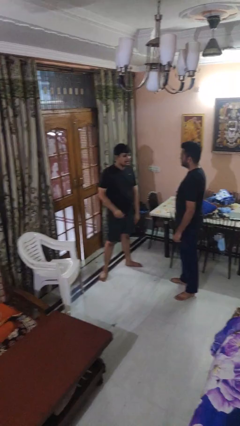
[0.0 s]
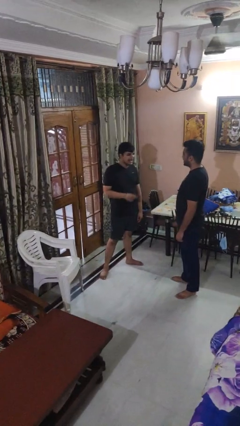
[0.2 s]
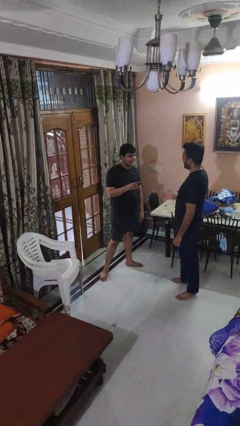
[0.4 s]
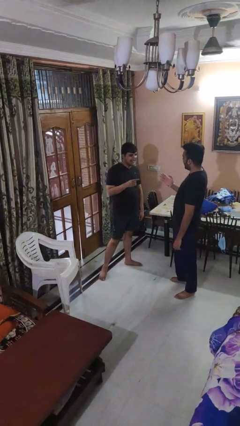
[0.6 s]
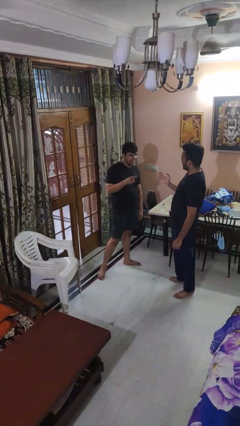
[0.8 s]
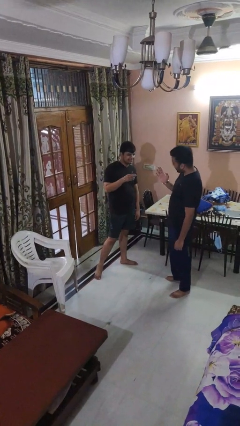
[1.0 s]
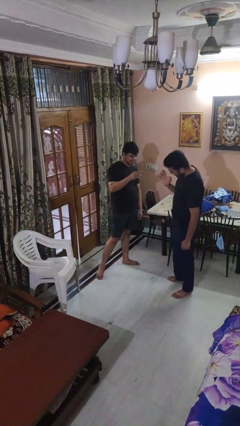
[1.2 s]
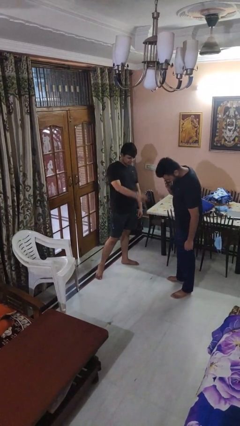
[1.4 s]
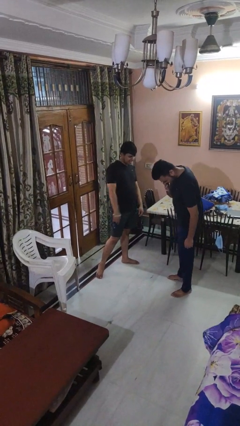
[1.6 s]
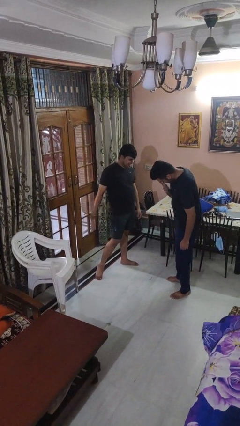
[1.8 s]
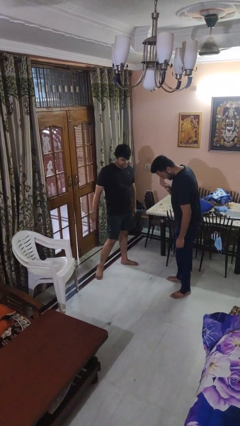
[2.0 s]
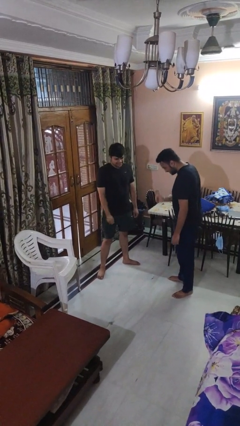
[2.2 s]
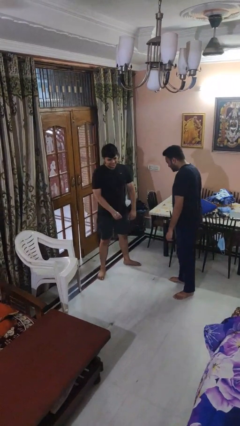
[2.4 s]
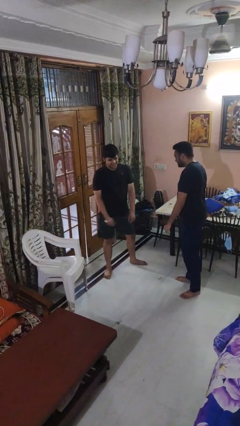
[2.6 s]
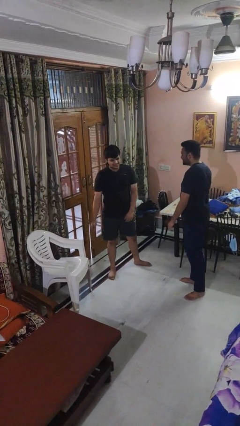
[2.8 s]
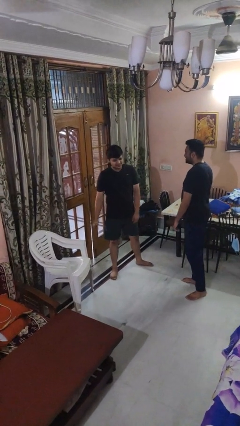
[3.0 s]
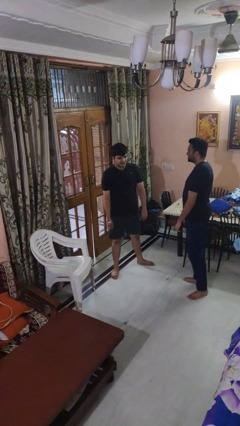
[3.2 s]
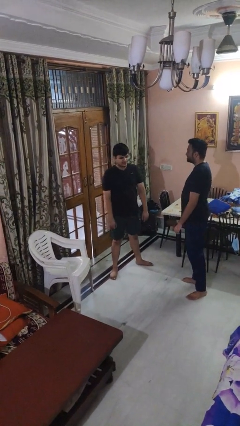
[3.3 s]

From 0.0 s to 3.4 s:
person laughs with person

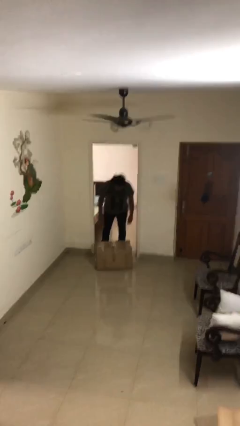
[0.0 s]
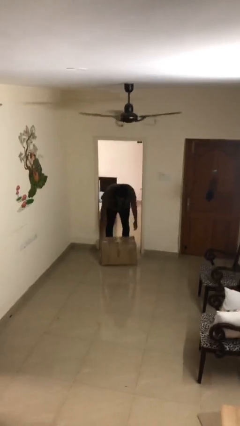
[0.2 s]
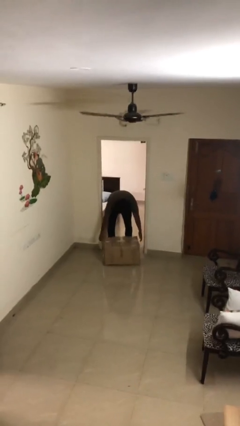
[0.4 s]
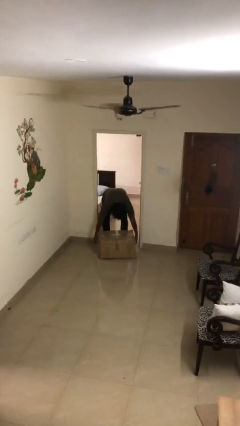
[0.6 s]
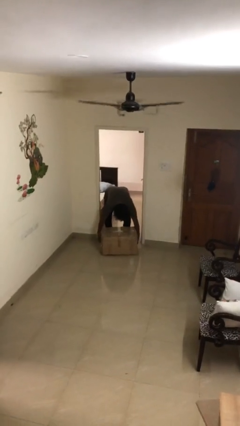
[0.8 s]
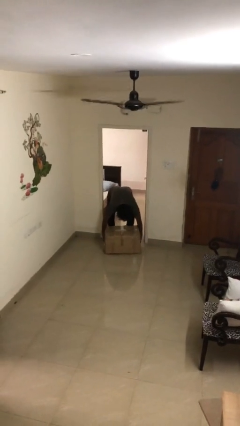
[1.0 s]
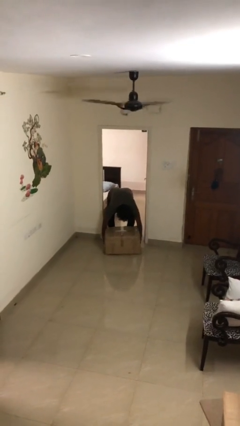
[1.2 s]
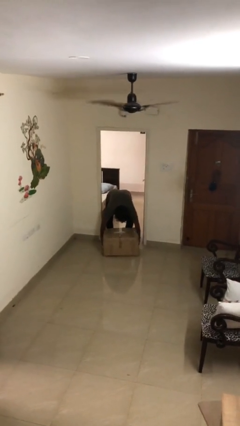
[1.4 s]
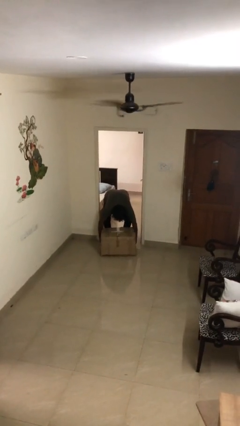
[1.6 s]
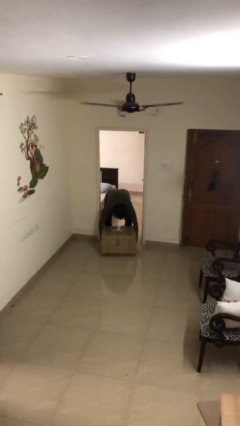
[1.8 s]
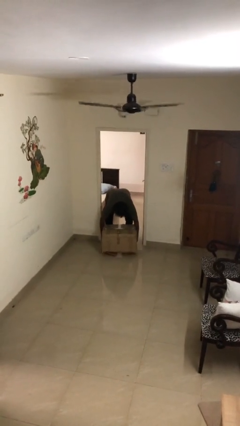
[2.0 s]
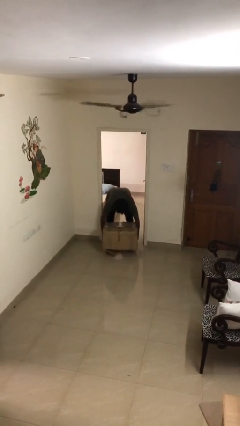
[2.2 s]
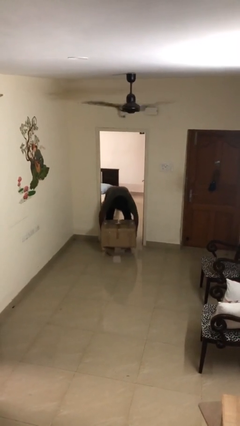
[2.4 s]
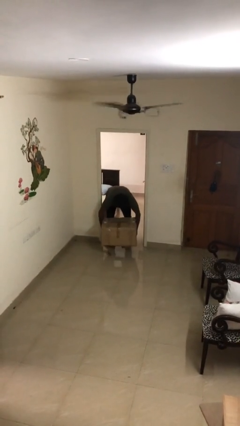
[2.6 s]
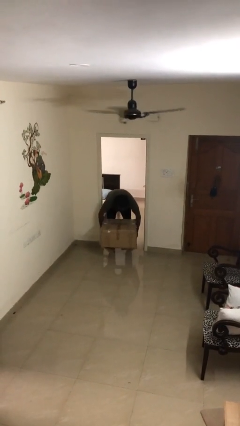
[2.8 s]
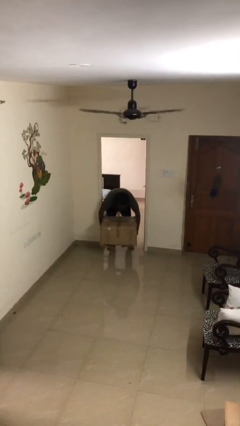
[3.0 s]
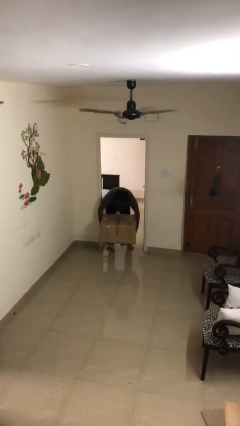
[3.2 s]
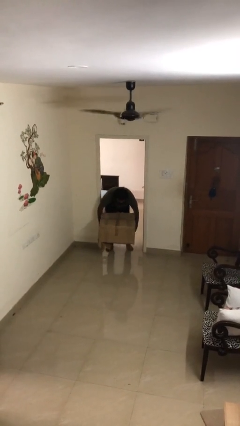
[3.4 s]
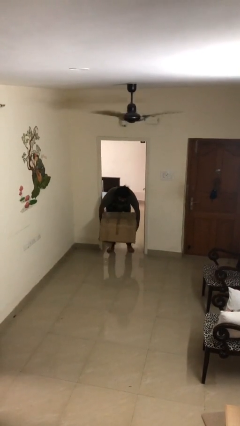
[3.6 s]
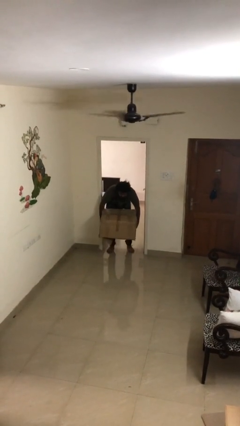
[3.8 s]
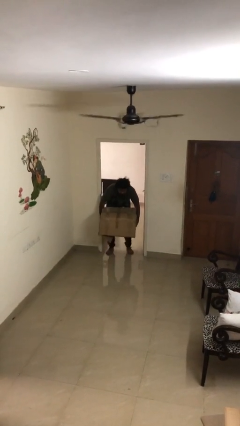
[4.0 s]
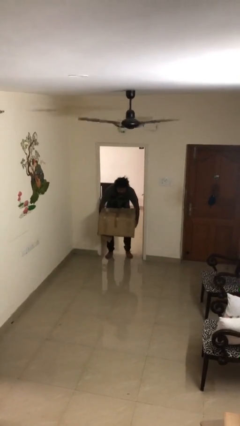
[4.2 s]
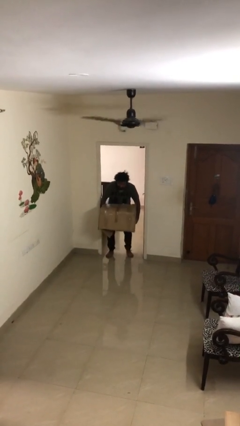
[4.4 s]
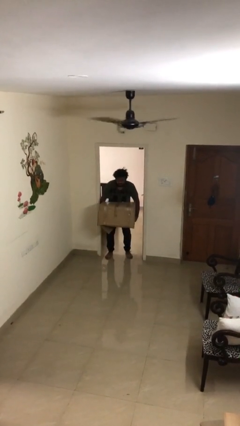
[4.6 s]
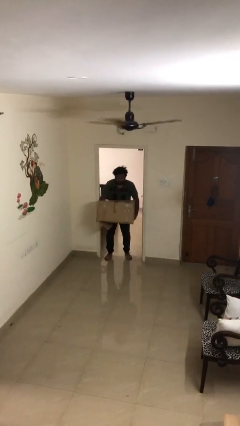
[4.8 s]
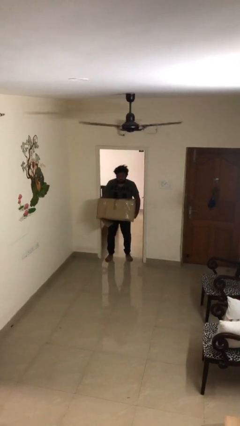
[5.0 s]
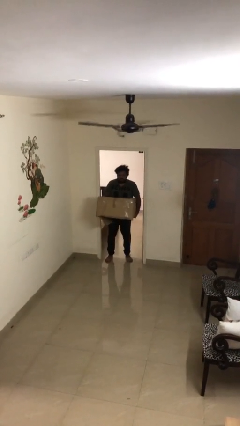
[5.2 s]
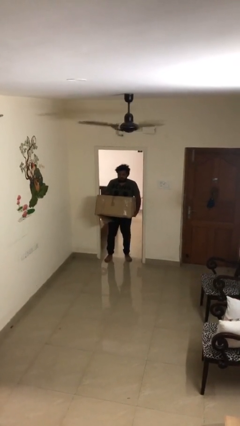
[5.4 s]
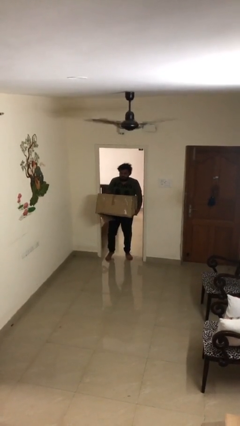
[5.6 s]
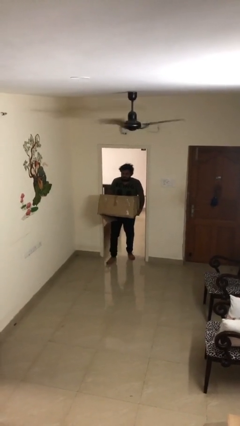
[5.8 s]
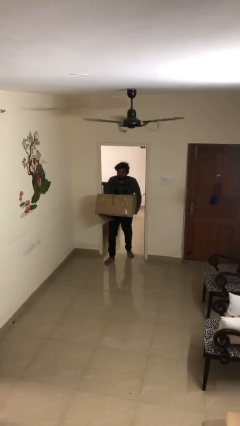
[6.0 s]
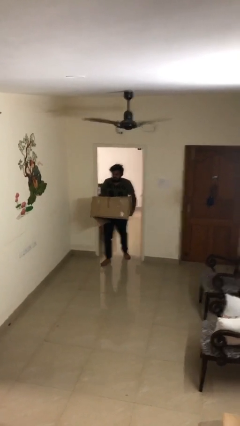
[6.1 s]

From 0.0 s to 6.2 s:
person picks up object from floor

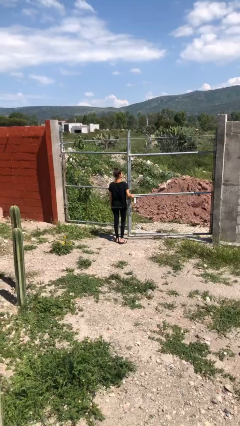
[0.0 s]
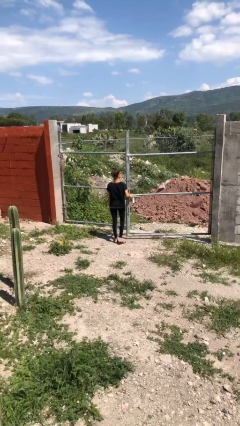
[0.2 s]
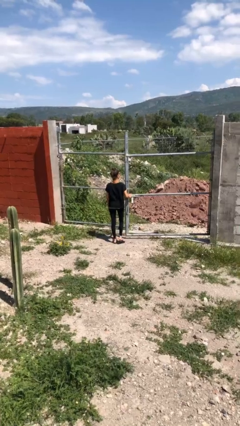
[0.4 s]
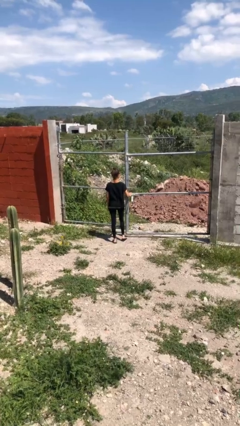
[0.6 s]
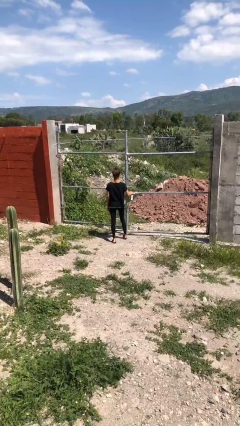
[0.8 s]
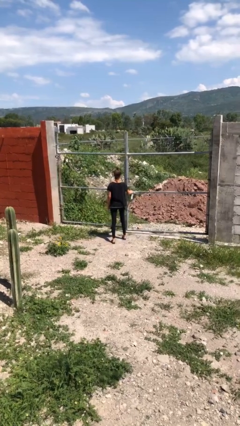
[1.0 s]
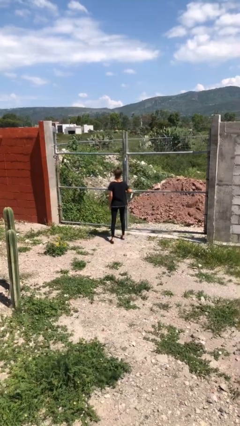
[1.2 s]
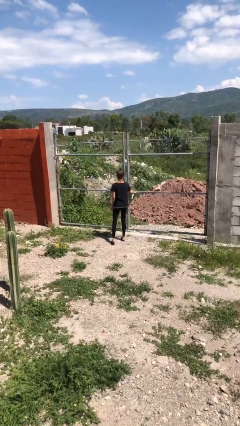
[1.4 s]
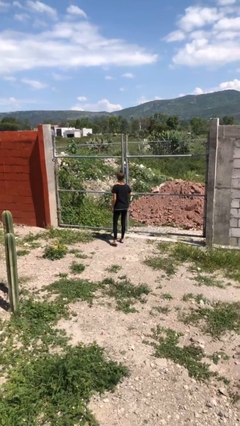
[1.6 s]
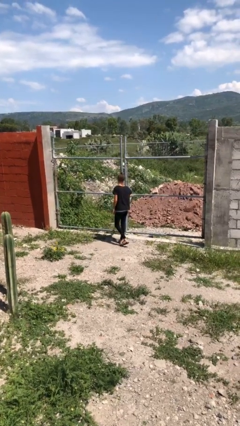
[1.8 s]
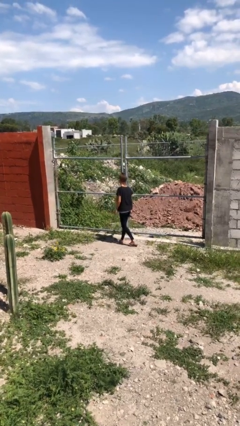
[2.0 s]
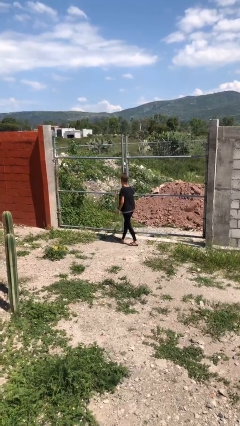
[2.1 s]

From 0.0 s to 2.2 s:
person closes gate

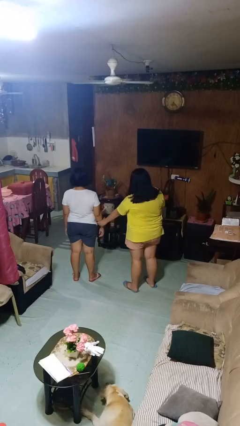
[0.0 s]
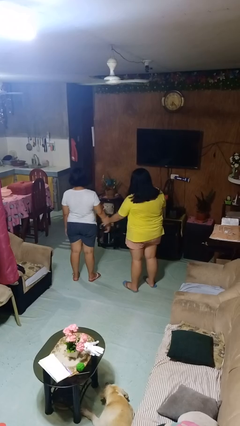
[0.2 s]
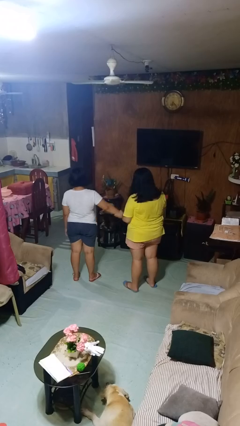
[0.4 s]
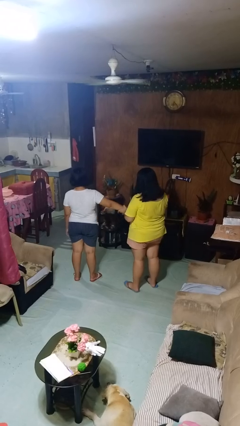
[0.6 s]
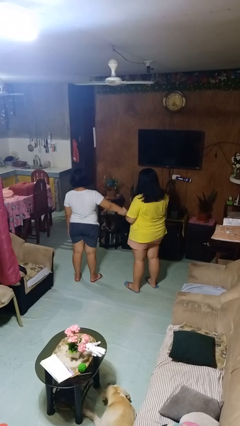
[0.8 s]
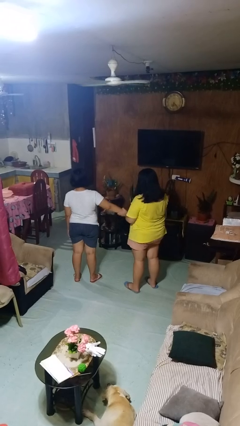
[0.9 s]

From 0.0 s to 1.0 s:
person grabs person by forearm

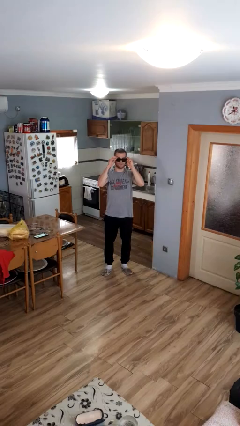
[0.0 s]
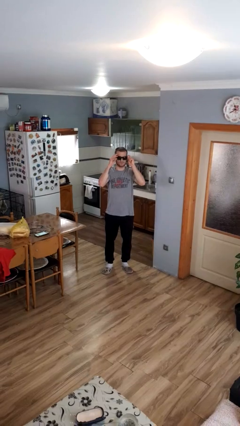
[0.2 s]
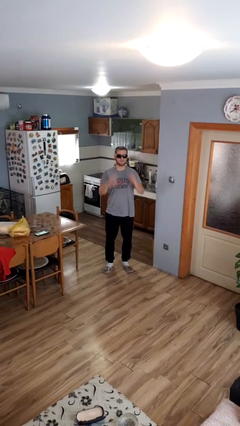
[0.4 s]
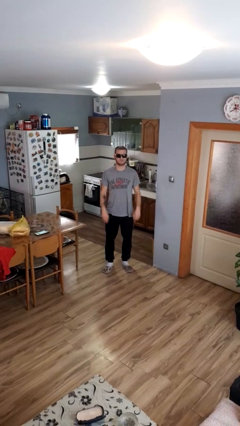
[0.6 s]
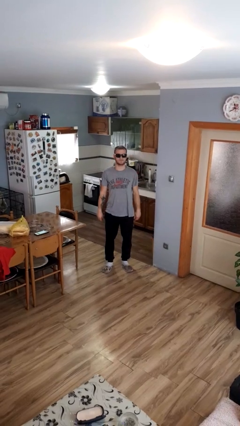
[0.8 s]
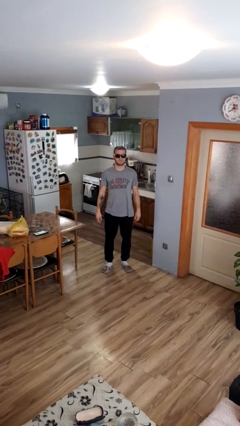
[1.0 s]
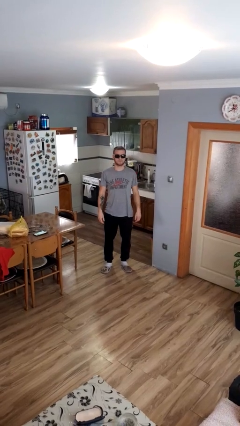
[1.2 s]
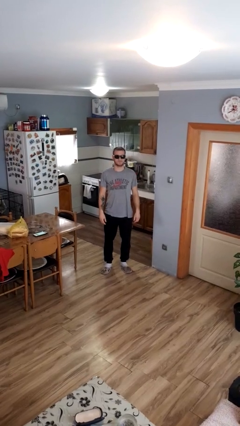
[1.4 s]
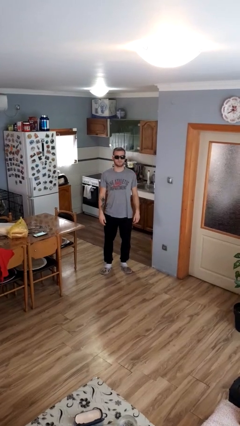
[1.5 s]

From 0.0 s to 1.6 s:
person puts on sunglasses

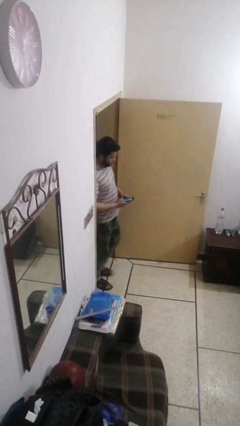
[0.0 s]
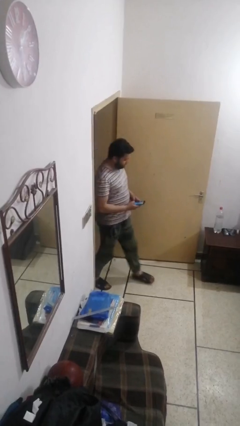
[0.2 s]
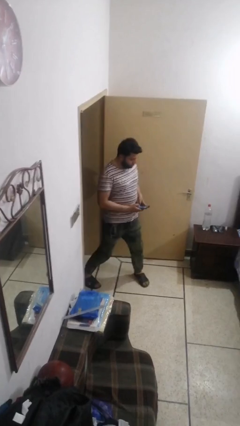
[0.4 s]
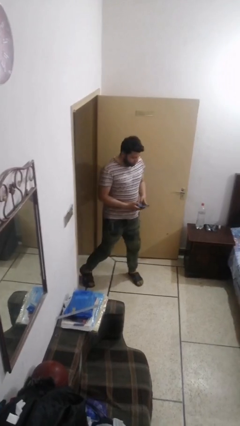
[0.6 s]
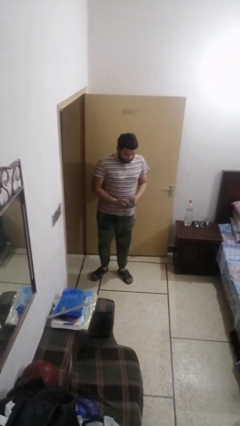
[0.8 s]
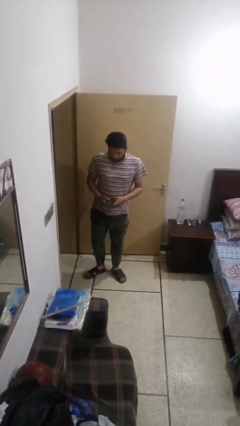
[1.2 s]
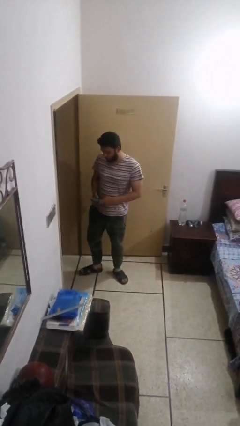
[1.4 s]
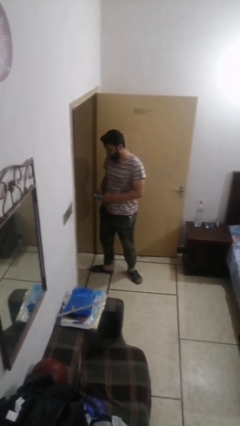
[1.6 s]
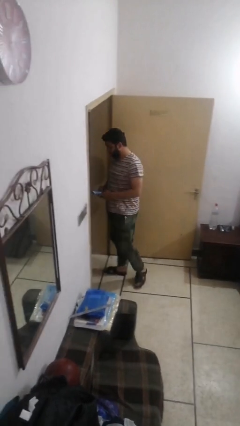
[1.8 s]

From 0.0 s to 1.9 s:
person enters scene through structure

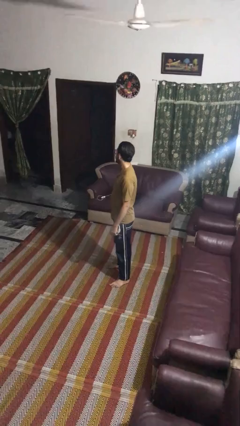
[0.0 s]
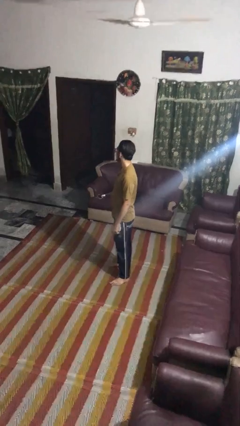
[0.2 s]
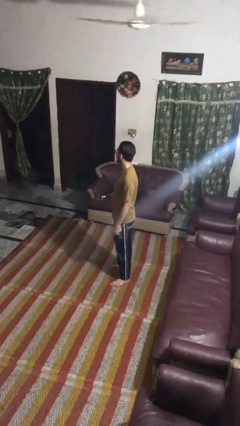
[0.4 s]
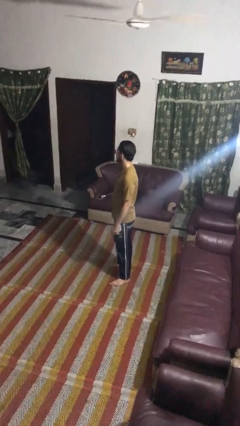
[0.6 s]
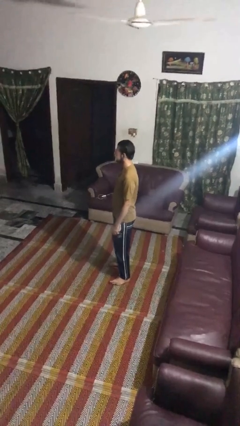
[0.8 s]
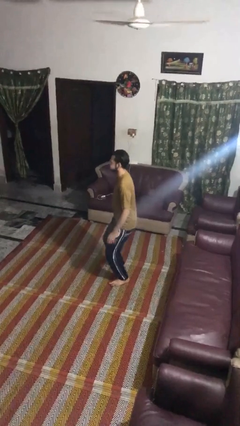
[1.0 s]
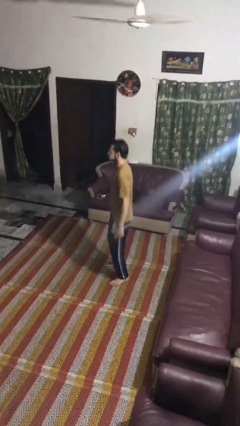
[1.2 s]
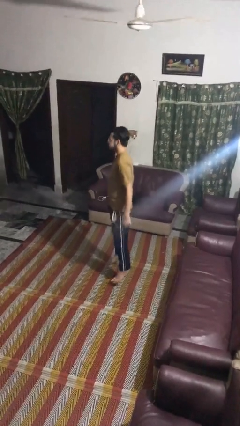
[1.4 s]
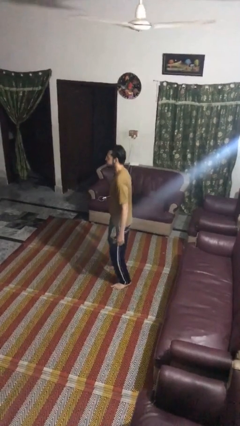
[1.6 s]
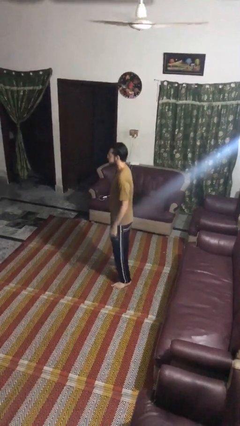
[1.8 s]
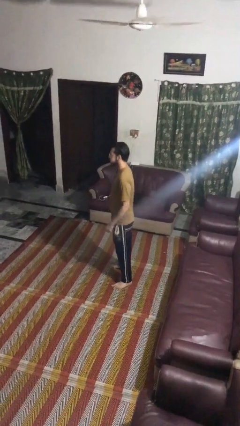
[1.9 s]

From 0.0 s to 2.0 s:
person jumps
